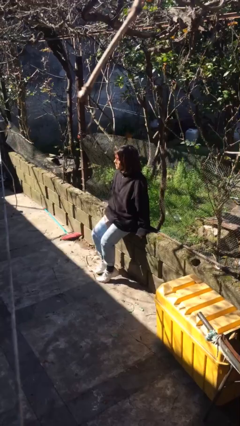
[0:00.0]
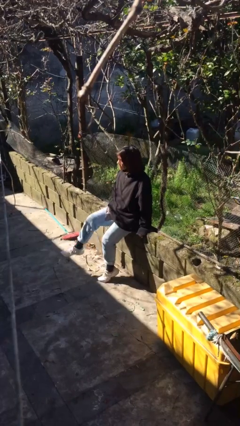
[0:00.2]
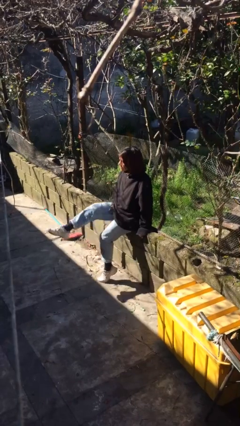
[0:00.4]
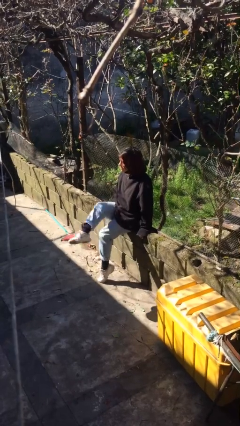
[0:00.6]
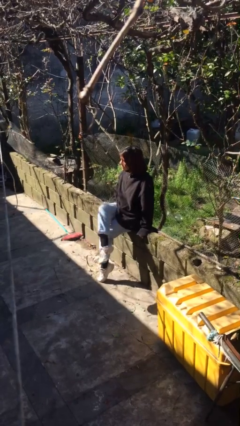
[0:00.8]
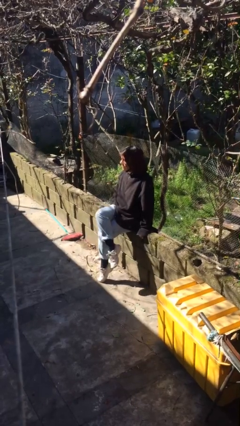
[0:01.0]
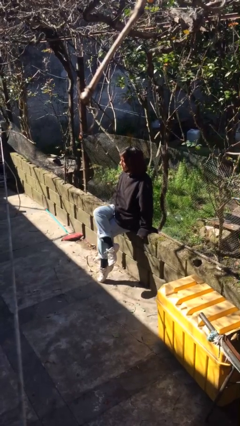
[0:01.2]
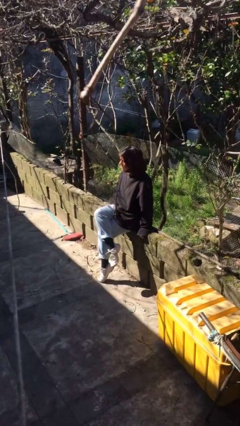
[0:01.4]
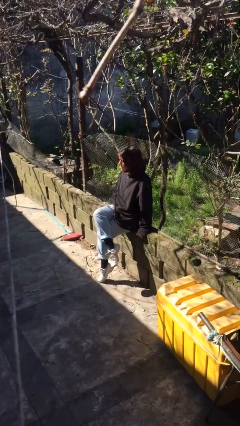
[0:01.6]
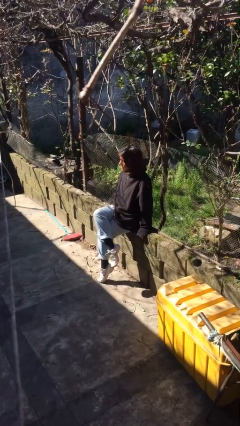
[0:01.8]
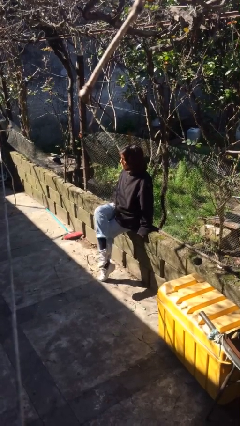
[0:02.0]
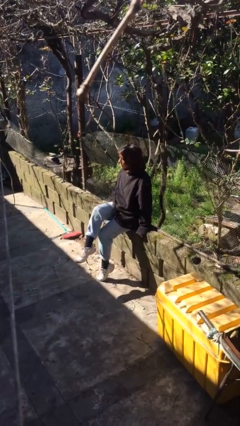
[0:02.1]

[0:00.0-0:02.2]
person crosses legs

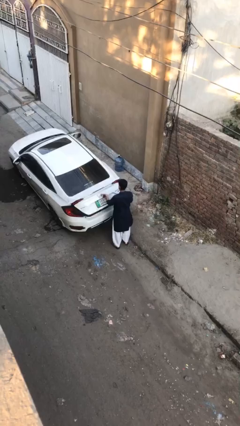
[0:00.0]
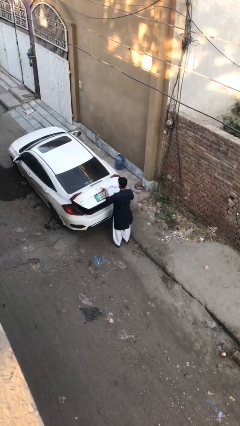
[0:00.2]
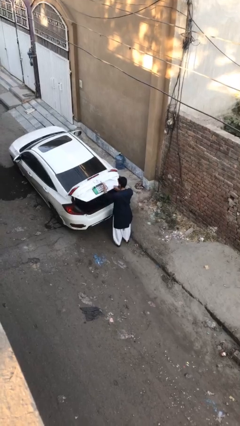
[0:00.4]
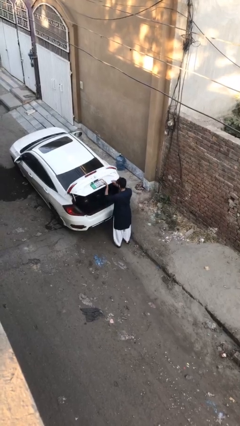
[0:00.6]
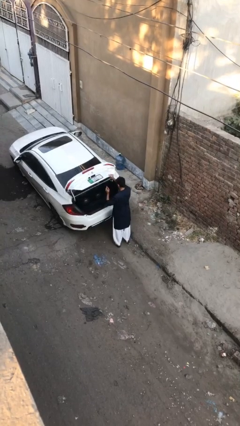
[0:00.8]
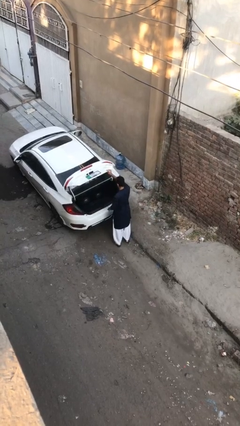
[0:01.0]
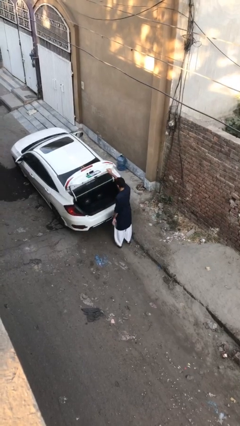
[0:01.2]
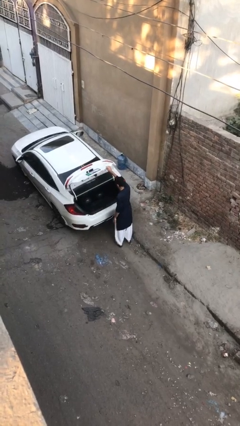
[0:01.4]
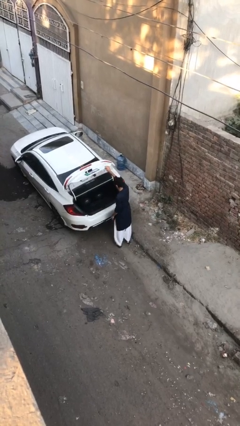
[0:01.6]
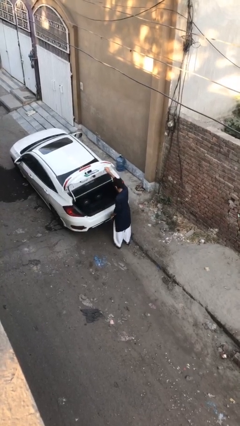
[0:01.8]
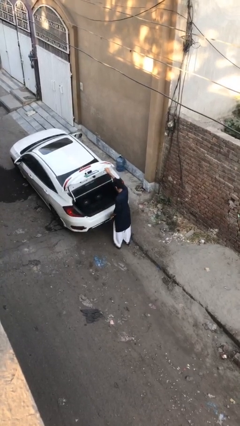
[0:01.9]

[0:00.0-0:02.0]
person opens car trunk

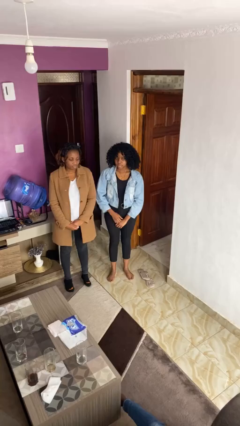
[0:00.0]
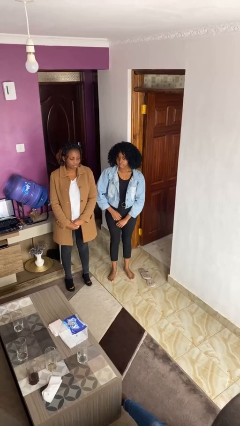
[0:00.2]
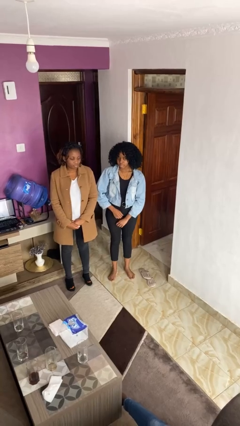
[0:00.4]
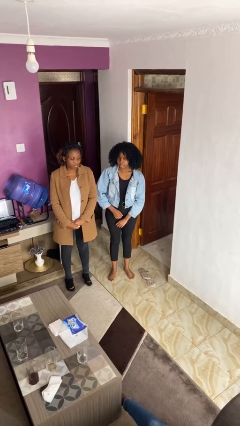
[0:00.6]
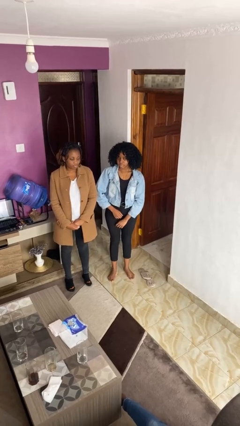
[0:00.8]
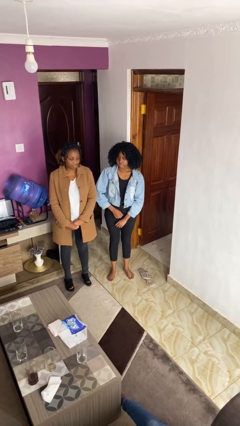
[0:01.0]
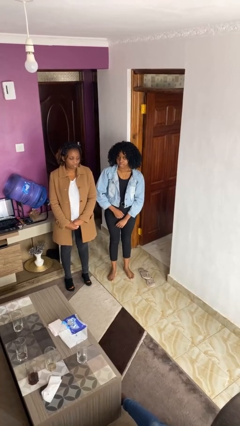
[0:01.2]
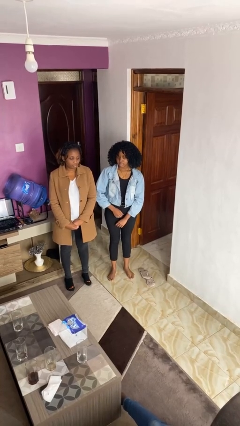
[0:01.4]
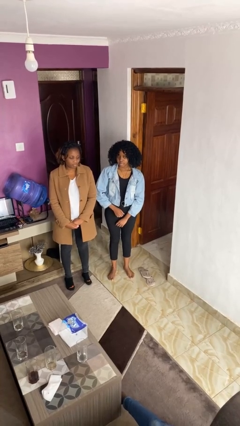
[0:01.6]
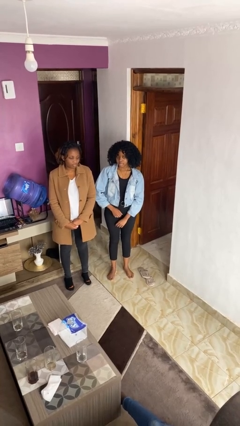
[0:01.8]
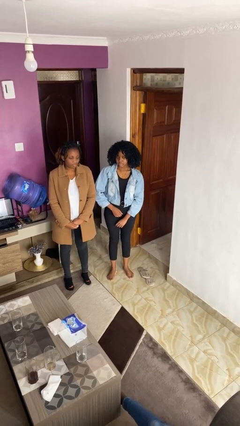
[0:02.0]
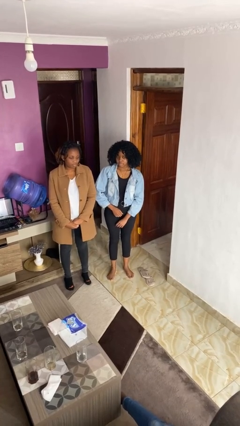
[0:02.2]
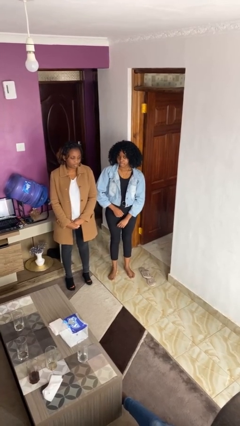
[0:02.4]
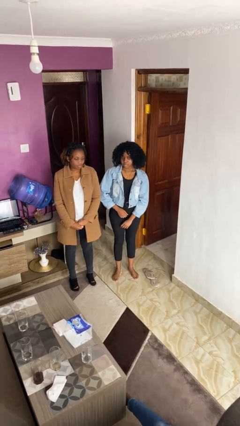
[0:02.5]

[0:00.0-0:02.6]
person nudges person with elbow

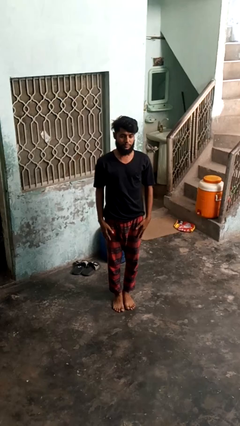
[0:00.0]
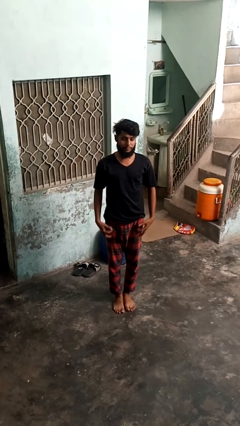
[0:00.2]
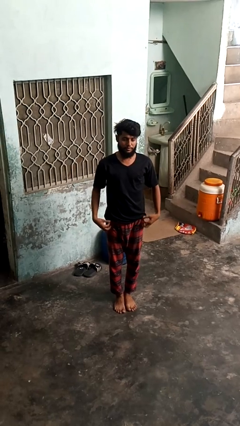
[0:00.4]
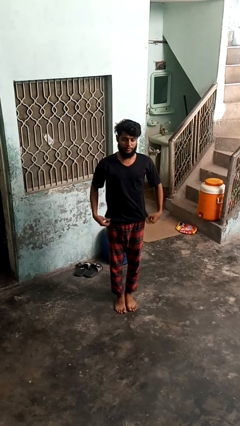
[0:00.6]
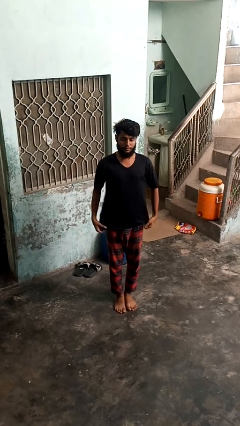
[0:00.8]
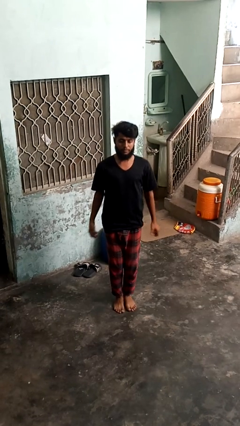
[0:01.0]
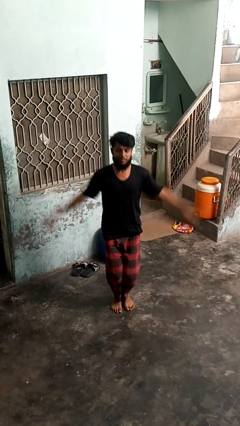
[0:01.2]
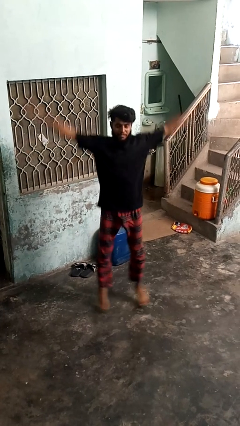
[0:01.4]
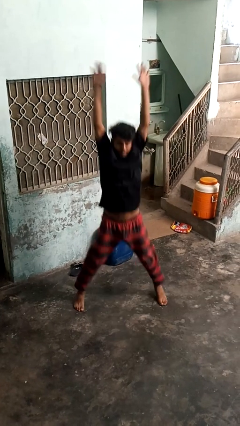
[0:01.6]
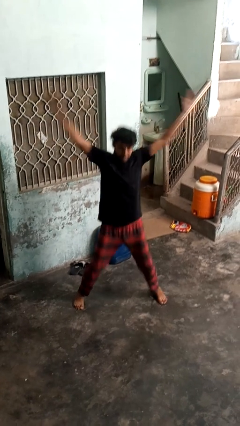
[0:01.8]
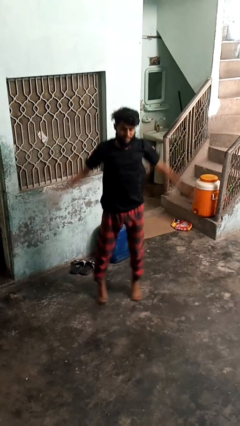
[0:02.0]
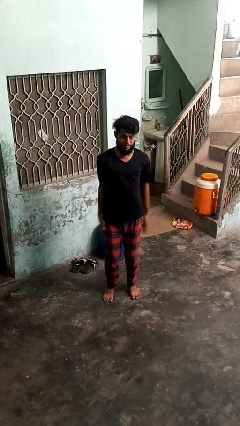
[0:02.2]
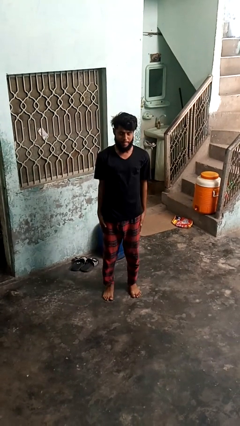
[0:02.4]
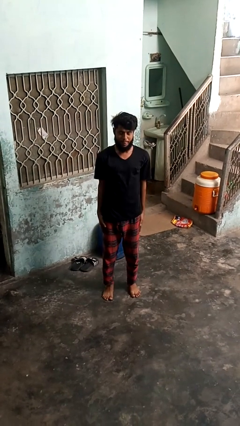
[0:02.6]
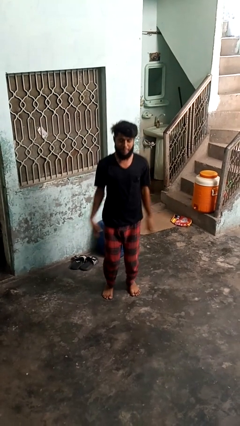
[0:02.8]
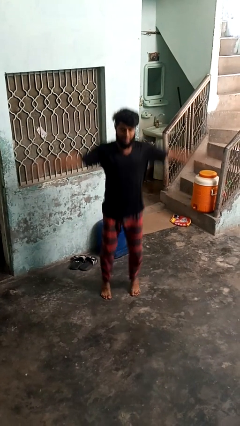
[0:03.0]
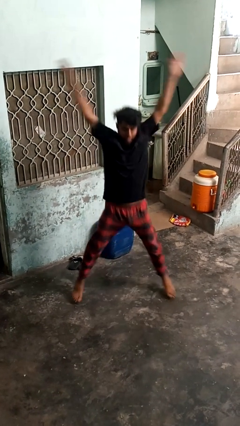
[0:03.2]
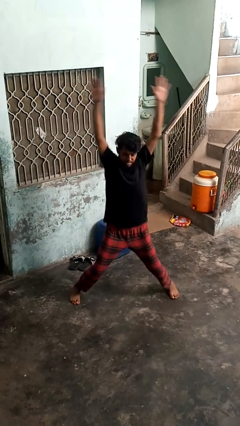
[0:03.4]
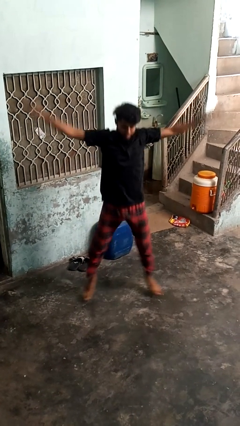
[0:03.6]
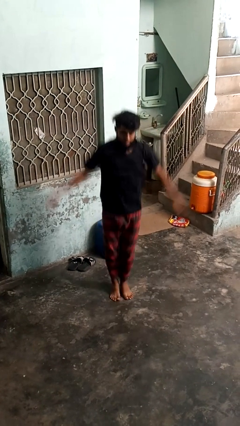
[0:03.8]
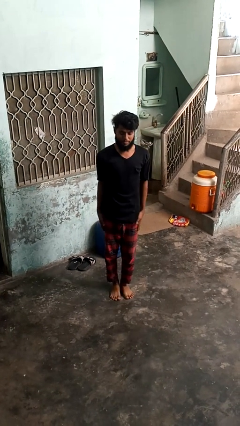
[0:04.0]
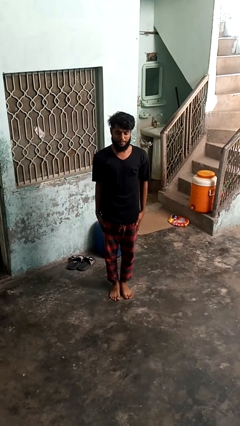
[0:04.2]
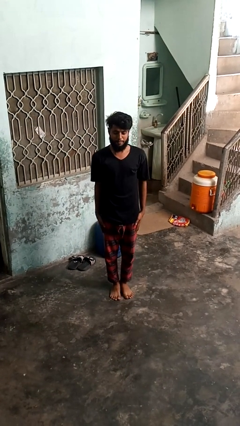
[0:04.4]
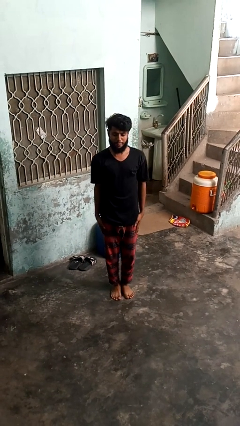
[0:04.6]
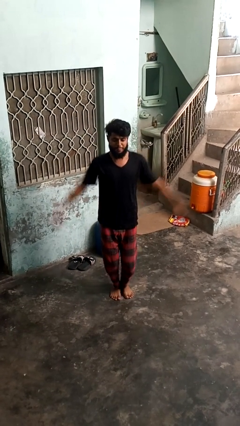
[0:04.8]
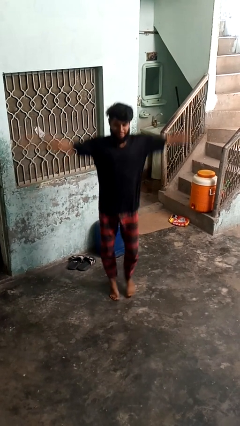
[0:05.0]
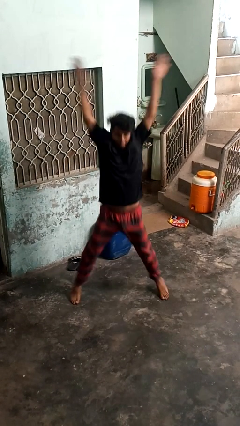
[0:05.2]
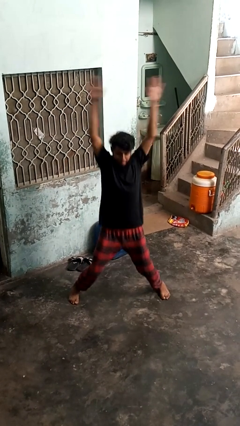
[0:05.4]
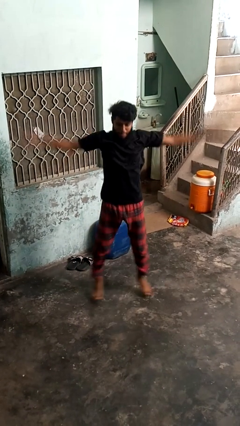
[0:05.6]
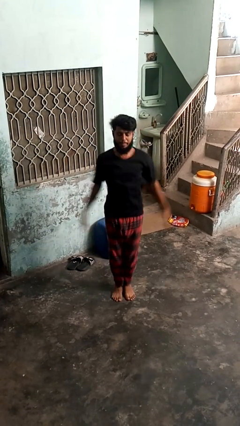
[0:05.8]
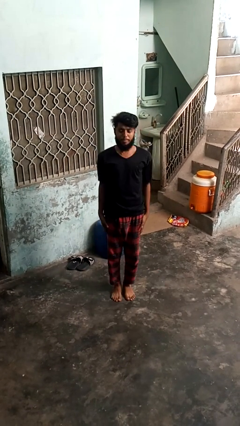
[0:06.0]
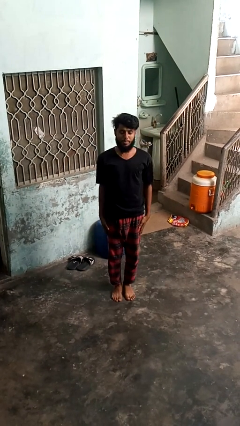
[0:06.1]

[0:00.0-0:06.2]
person exercises with situp

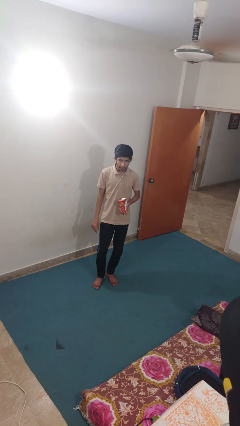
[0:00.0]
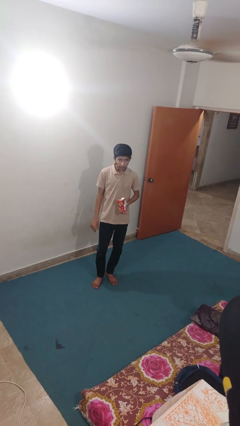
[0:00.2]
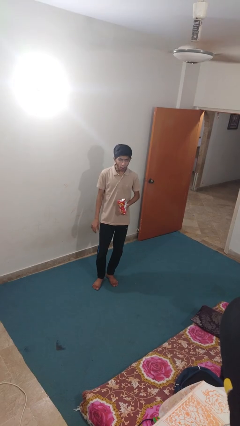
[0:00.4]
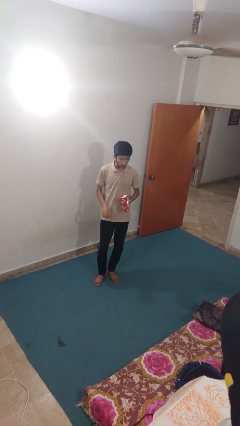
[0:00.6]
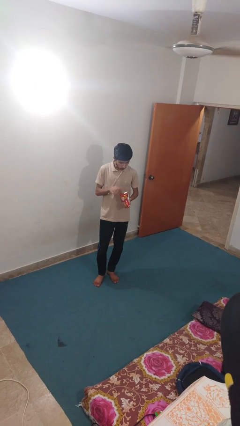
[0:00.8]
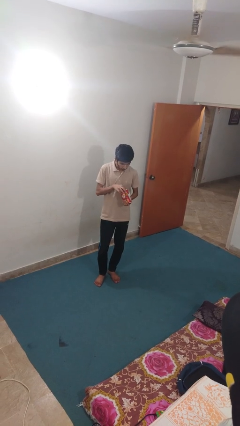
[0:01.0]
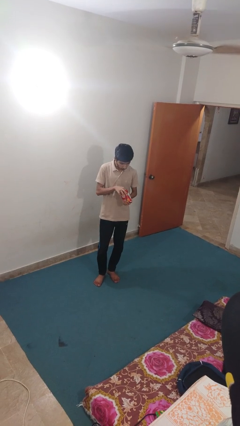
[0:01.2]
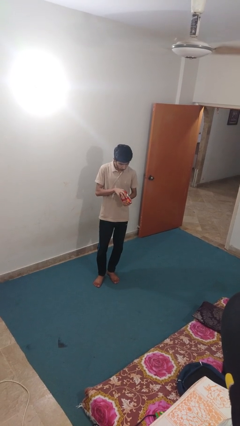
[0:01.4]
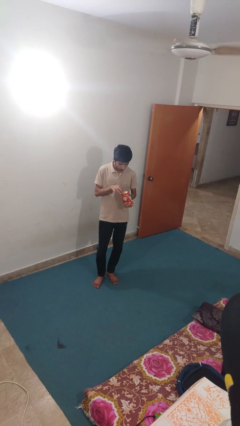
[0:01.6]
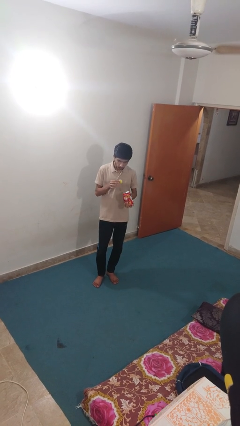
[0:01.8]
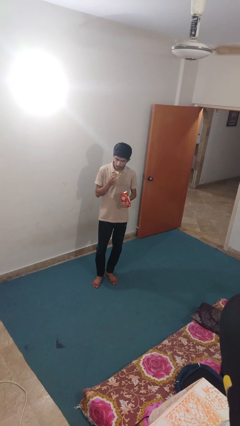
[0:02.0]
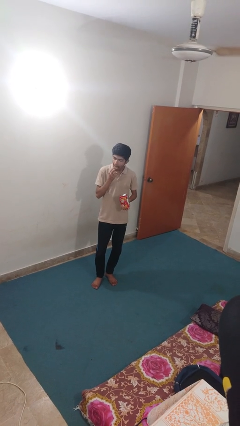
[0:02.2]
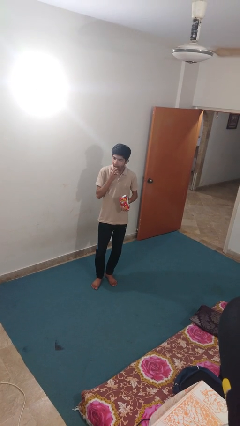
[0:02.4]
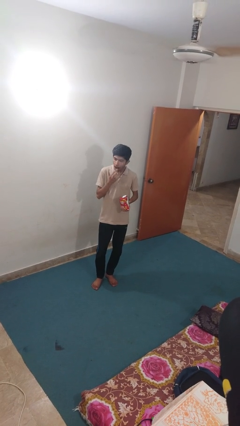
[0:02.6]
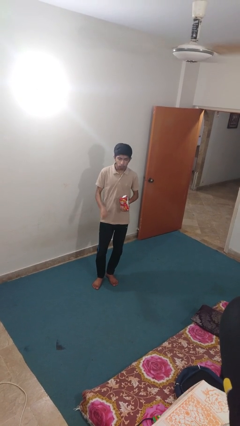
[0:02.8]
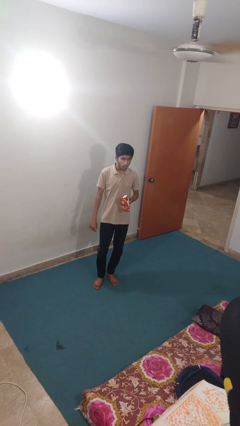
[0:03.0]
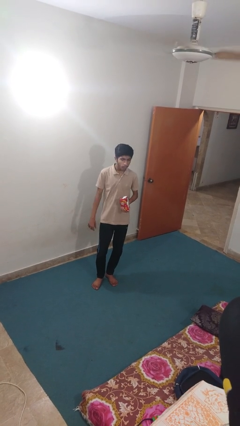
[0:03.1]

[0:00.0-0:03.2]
person eats snack from bag

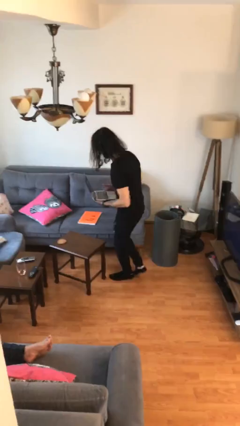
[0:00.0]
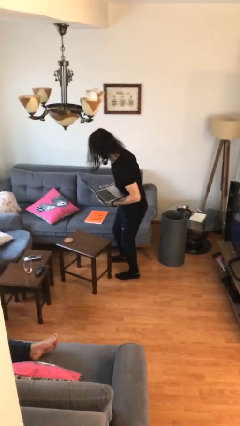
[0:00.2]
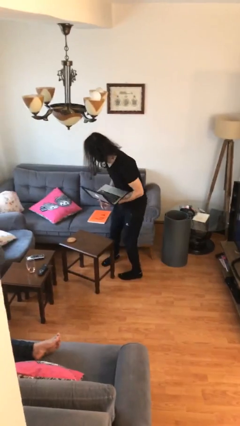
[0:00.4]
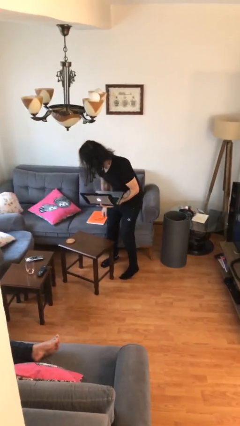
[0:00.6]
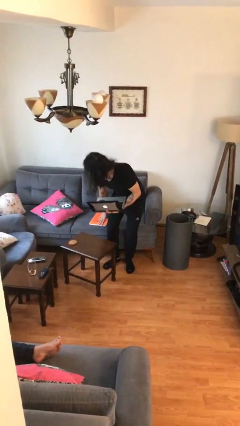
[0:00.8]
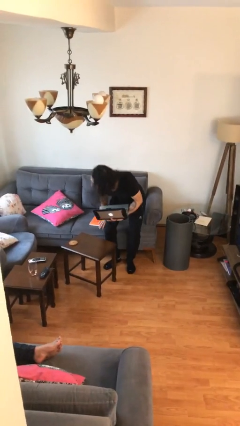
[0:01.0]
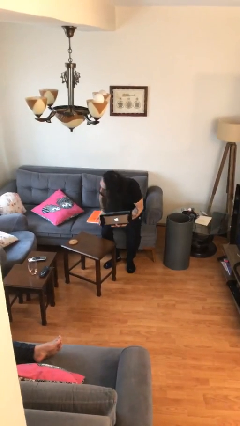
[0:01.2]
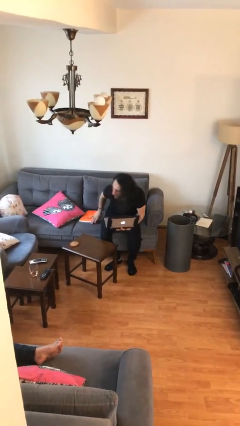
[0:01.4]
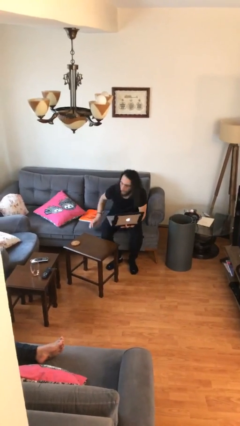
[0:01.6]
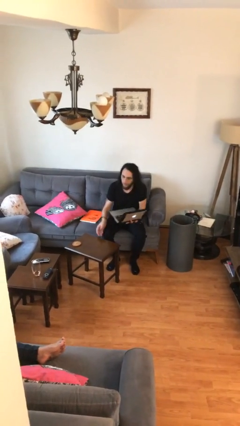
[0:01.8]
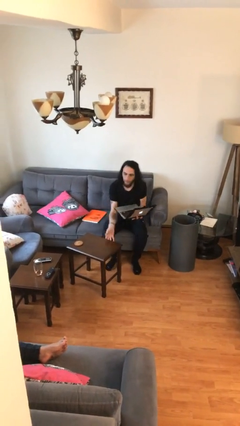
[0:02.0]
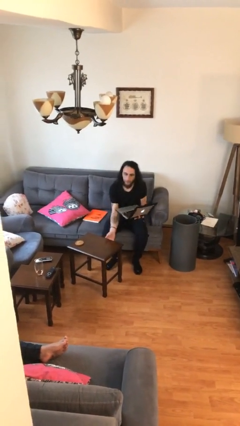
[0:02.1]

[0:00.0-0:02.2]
person sits down
